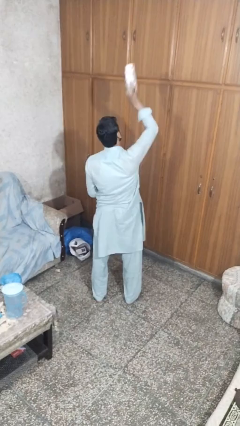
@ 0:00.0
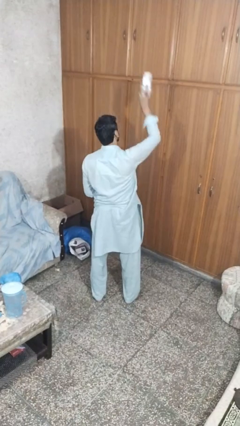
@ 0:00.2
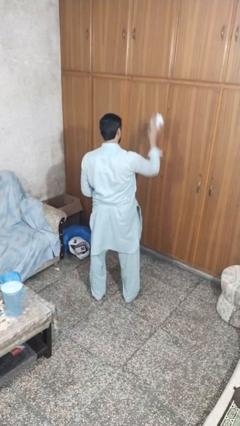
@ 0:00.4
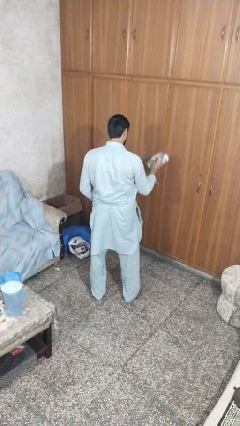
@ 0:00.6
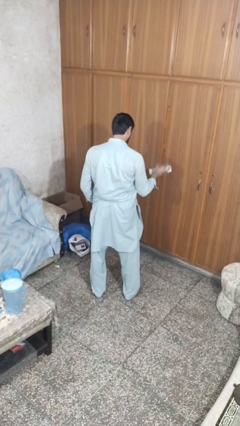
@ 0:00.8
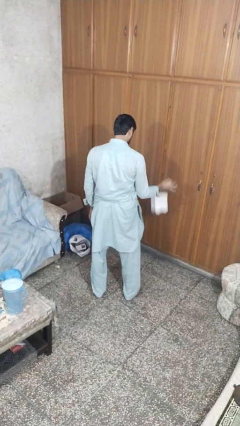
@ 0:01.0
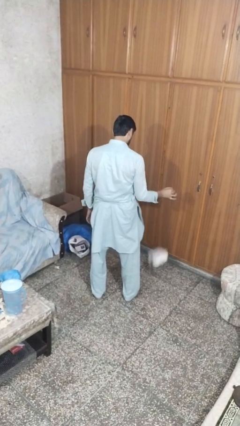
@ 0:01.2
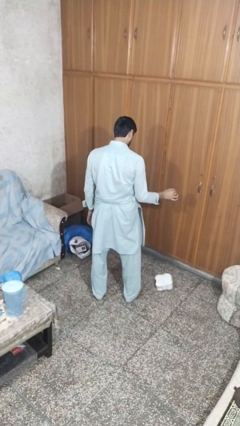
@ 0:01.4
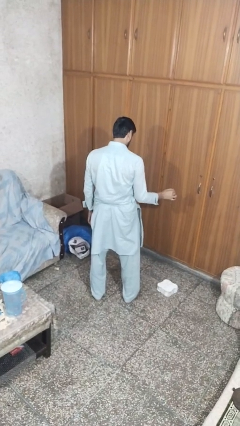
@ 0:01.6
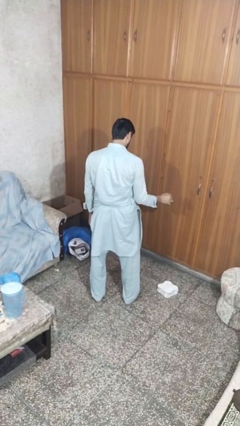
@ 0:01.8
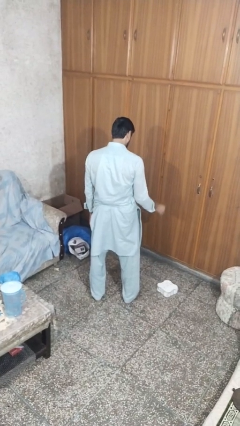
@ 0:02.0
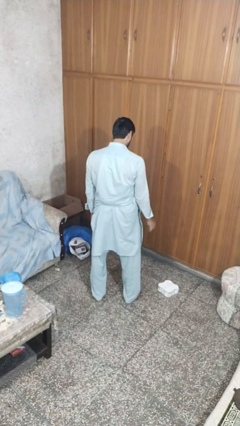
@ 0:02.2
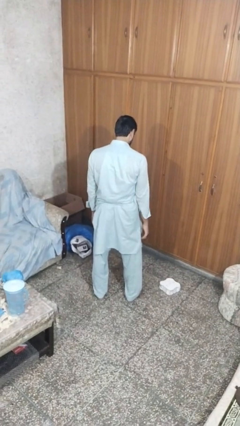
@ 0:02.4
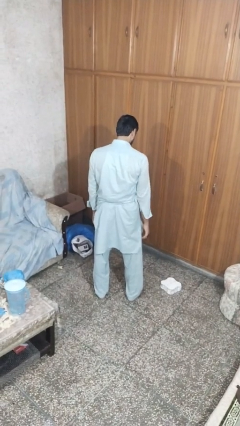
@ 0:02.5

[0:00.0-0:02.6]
person catches dropped object

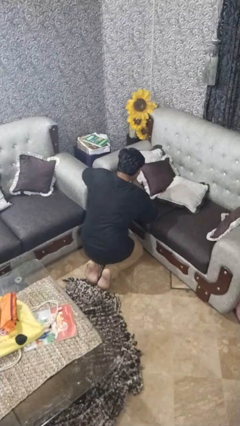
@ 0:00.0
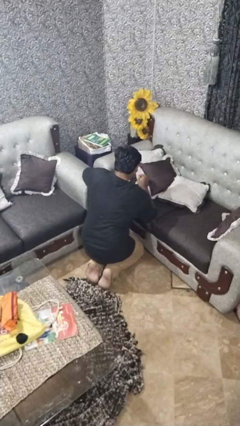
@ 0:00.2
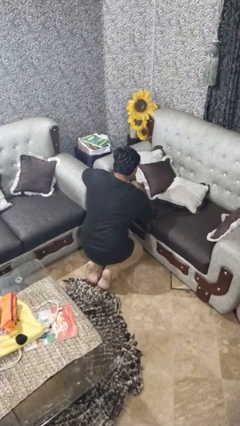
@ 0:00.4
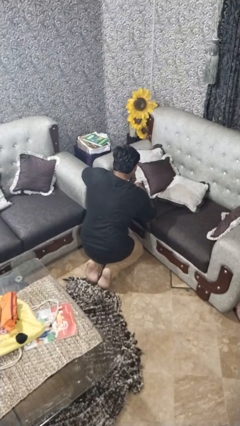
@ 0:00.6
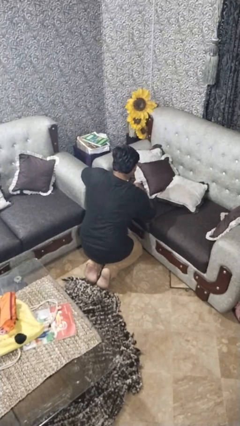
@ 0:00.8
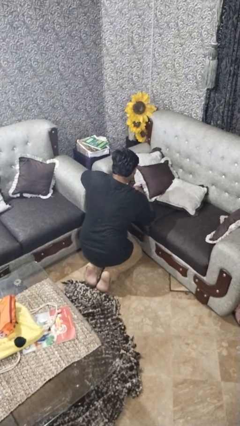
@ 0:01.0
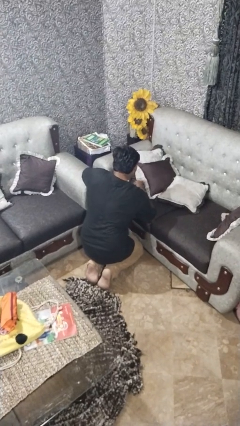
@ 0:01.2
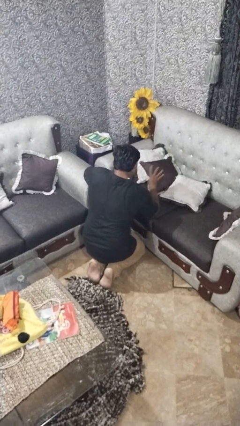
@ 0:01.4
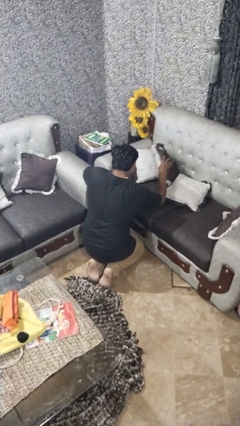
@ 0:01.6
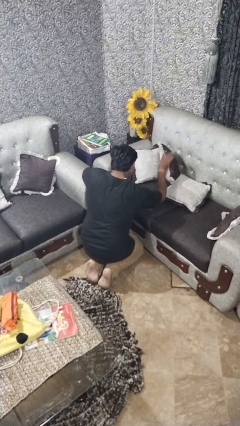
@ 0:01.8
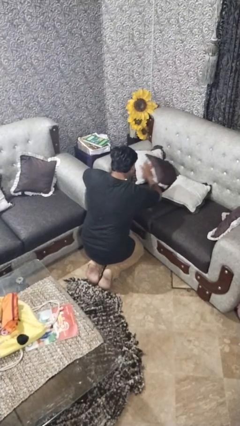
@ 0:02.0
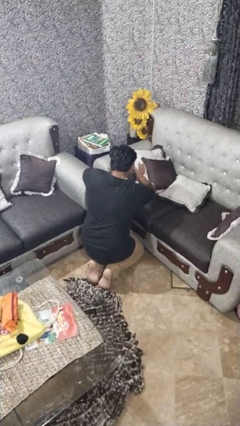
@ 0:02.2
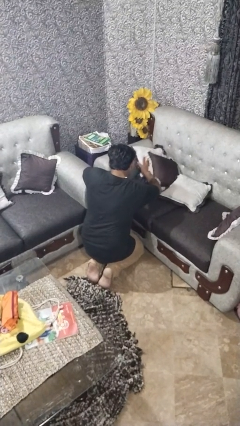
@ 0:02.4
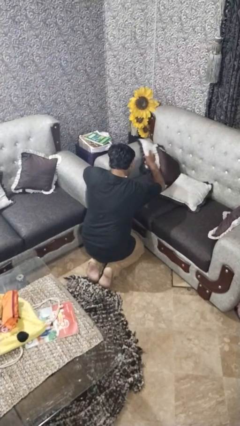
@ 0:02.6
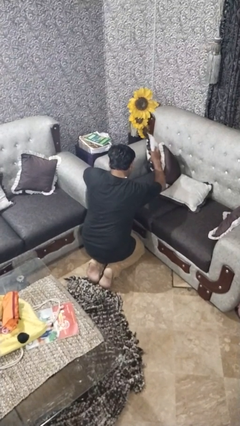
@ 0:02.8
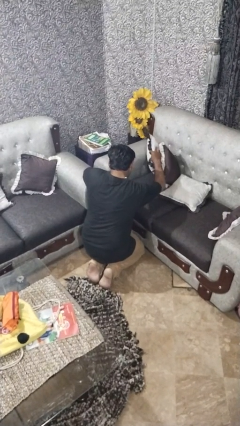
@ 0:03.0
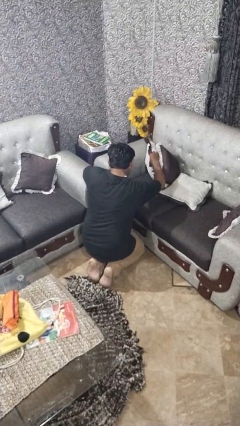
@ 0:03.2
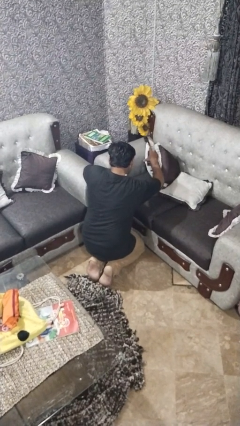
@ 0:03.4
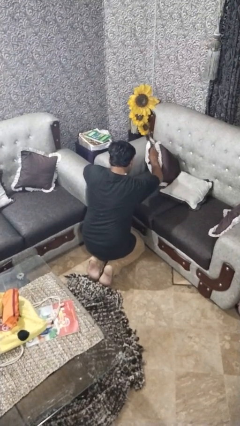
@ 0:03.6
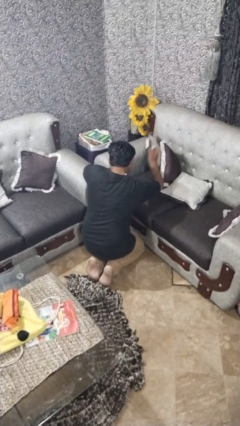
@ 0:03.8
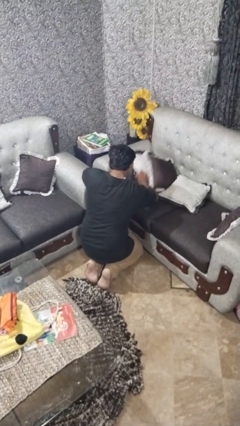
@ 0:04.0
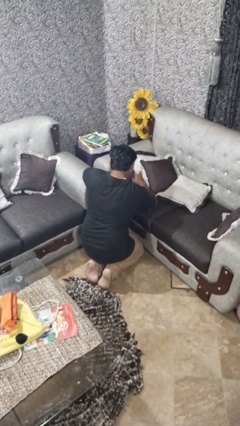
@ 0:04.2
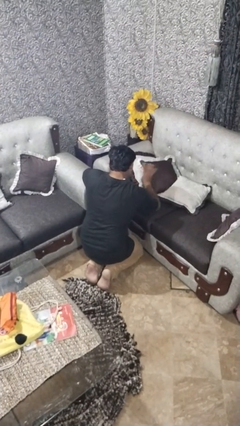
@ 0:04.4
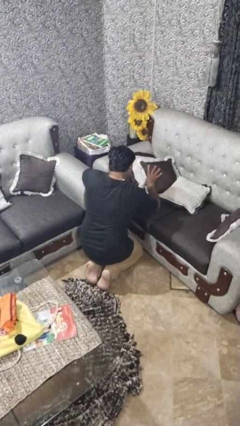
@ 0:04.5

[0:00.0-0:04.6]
person searches in couch

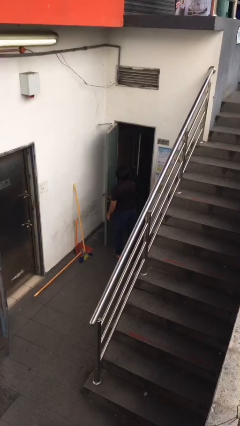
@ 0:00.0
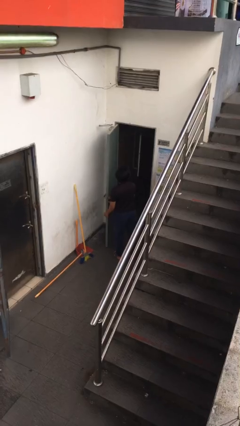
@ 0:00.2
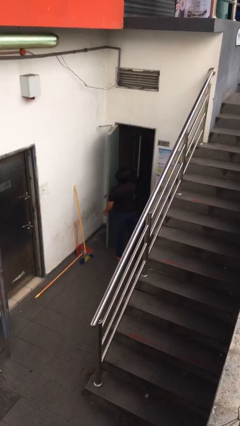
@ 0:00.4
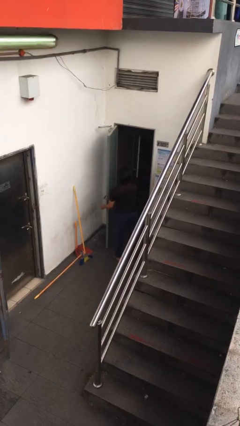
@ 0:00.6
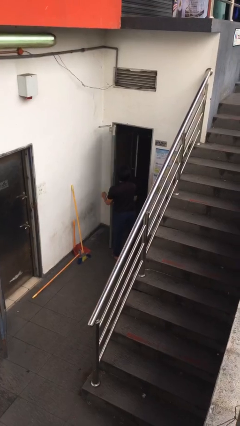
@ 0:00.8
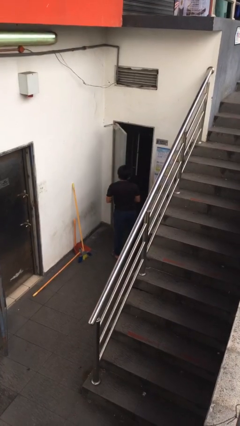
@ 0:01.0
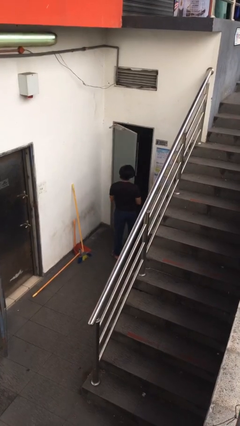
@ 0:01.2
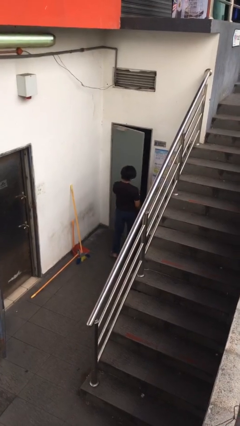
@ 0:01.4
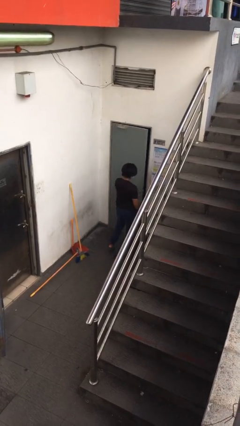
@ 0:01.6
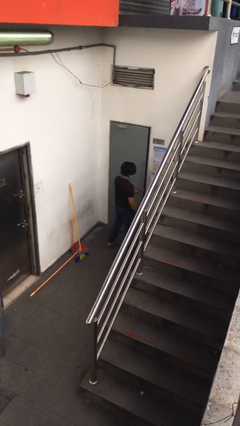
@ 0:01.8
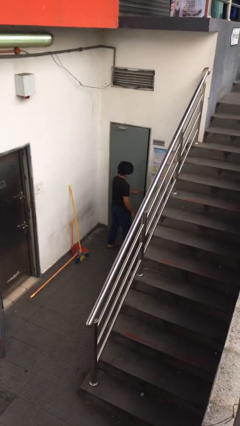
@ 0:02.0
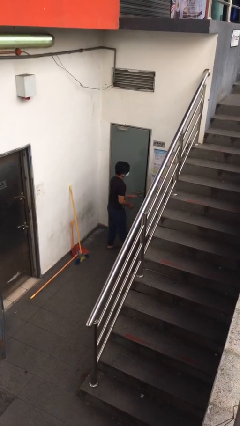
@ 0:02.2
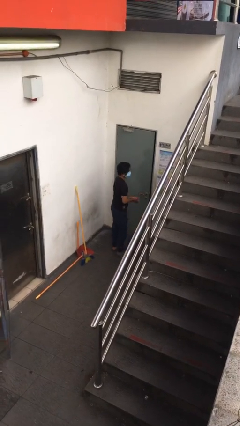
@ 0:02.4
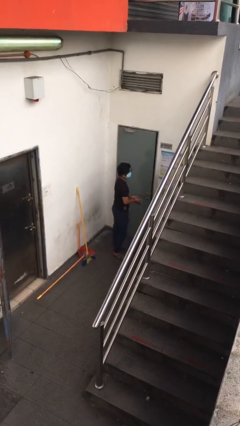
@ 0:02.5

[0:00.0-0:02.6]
person closes facility door

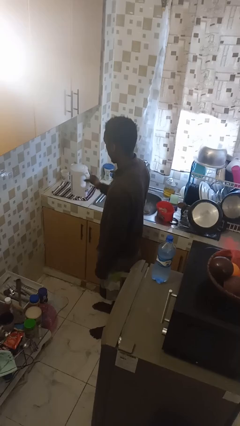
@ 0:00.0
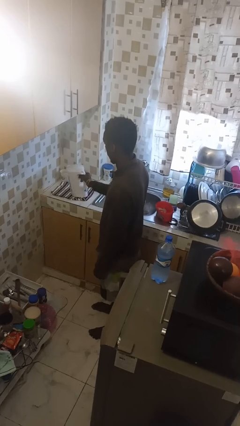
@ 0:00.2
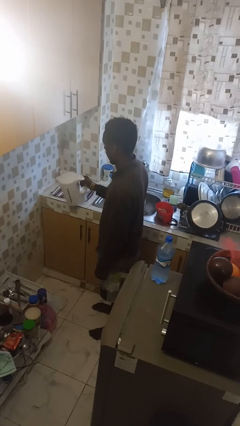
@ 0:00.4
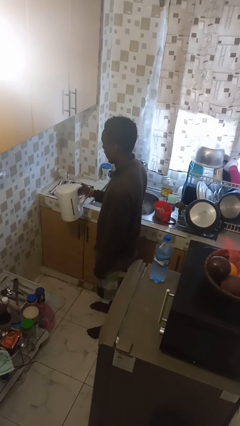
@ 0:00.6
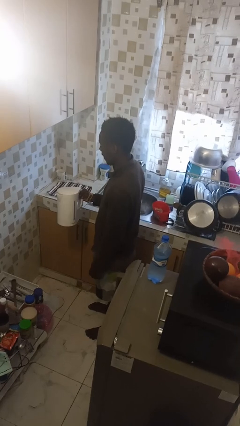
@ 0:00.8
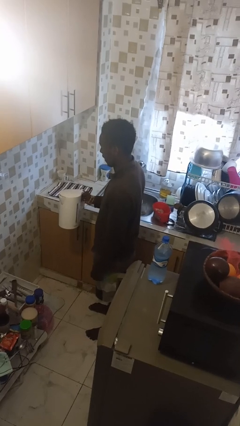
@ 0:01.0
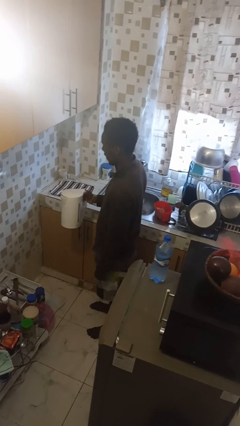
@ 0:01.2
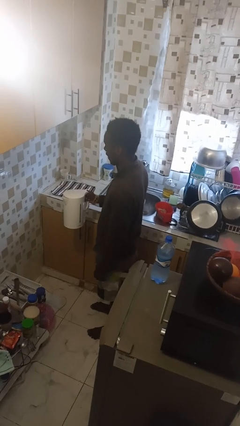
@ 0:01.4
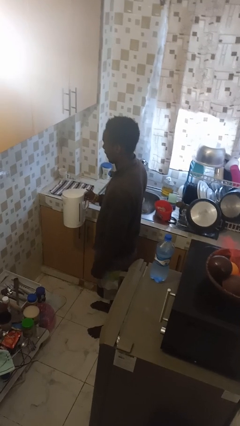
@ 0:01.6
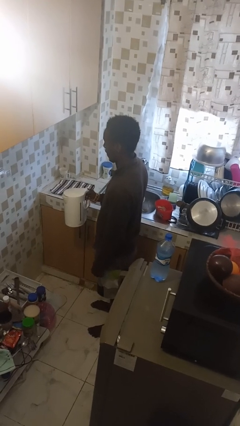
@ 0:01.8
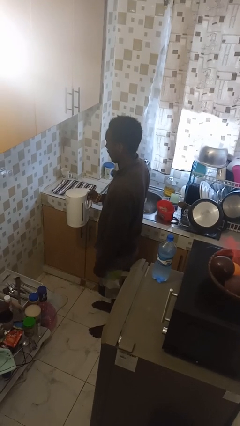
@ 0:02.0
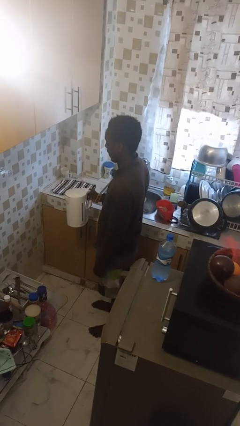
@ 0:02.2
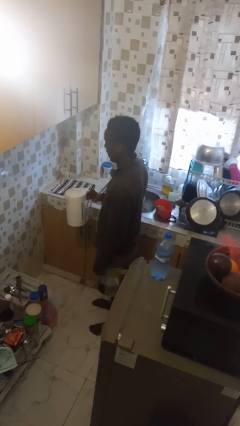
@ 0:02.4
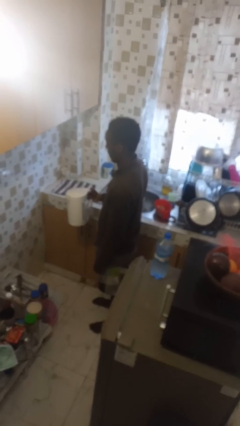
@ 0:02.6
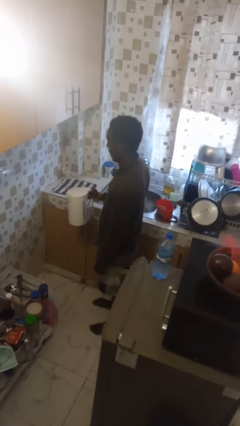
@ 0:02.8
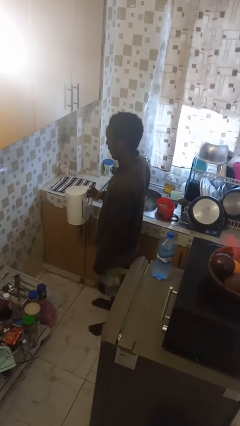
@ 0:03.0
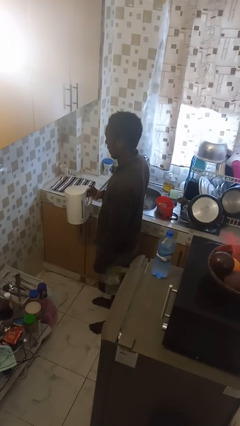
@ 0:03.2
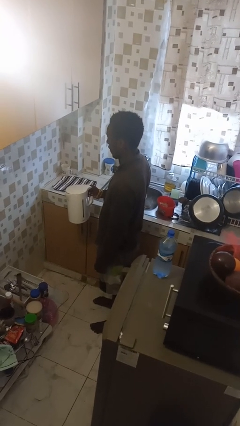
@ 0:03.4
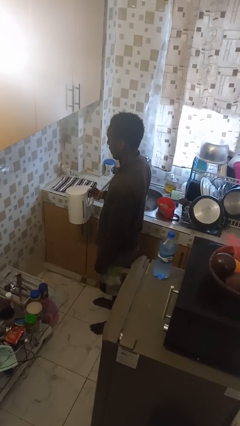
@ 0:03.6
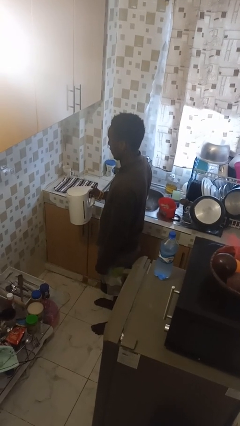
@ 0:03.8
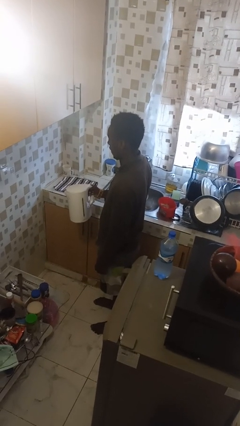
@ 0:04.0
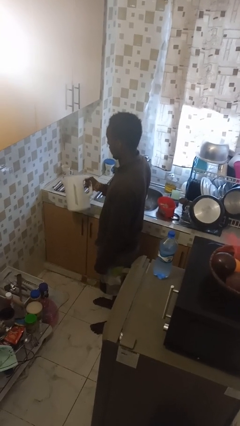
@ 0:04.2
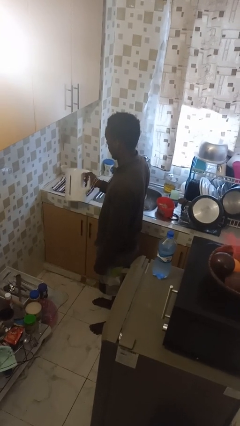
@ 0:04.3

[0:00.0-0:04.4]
person picks up object from countertop

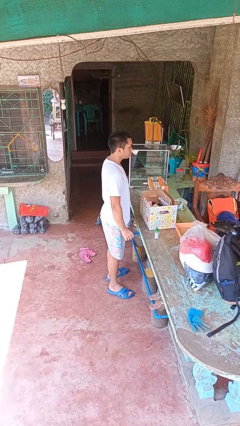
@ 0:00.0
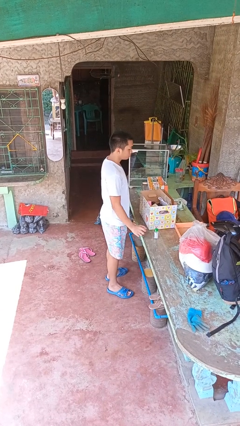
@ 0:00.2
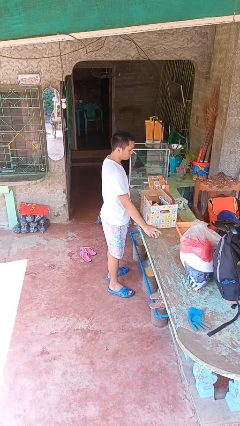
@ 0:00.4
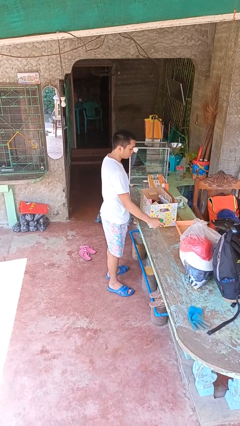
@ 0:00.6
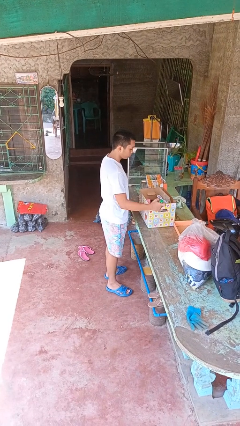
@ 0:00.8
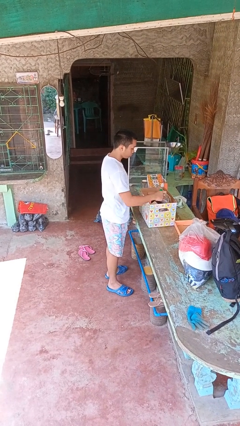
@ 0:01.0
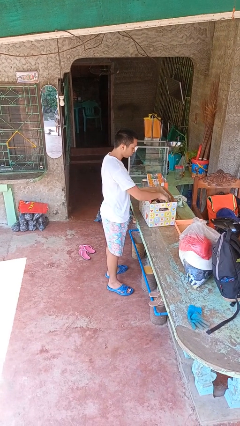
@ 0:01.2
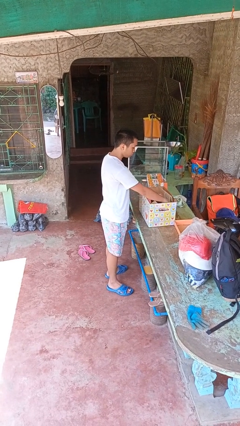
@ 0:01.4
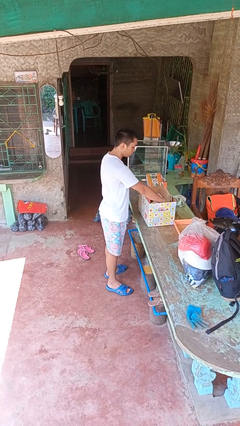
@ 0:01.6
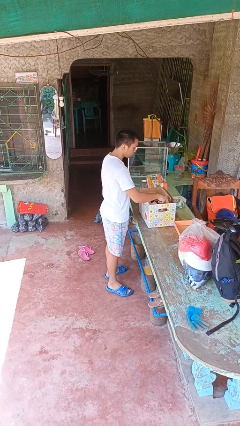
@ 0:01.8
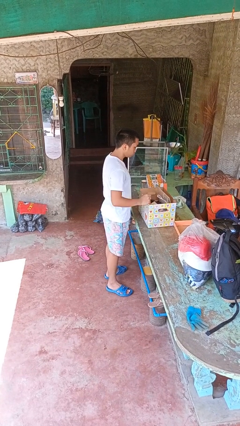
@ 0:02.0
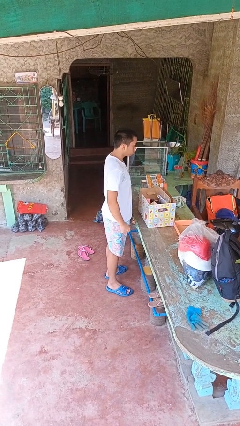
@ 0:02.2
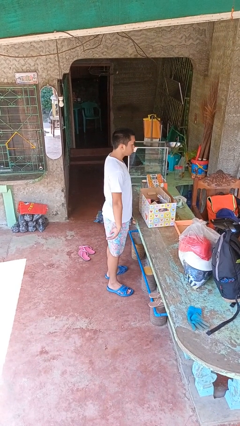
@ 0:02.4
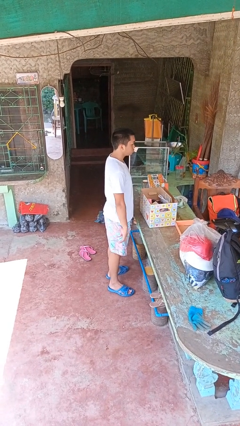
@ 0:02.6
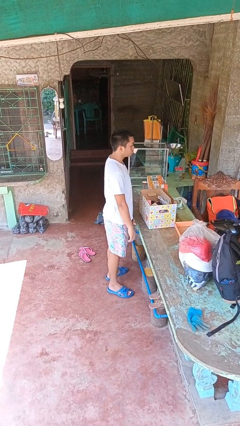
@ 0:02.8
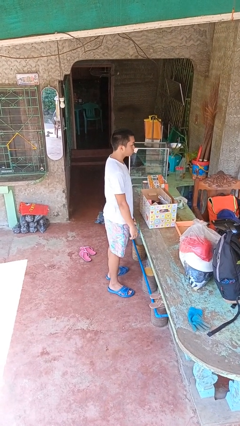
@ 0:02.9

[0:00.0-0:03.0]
person puts object into box

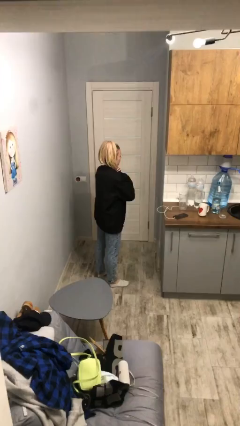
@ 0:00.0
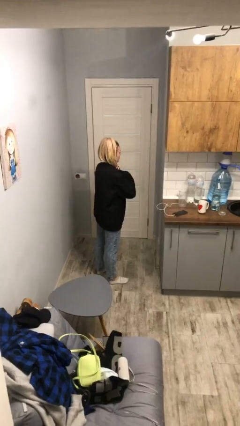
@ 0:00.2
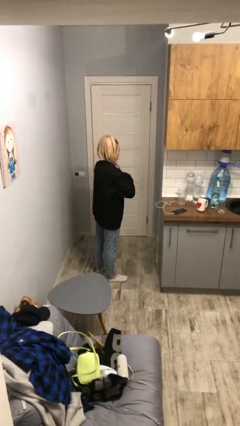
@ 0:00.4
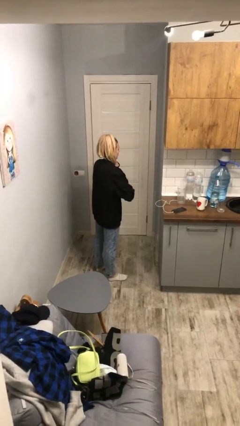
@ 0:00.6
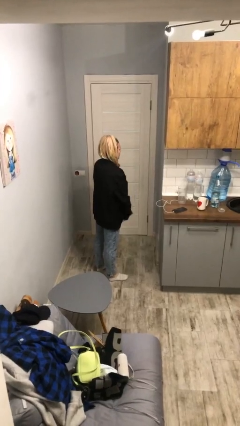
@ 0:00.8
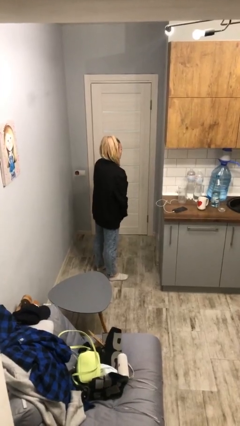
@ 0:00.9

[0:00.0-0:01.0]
person unzips jacket
